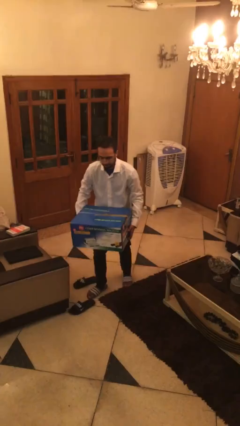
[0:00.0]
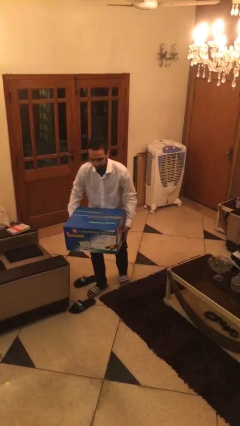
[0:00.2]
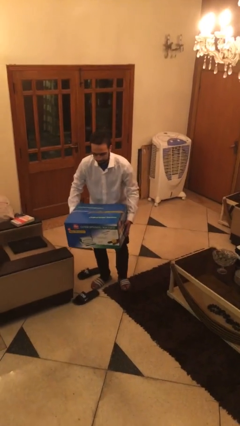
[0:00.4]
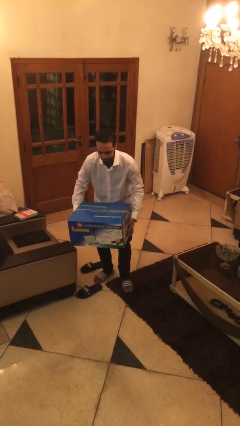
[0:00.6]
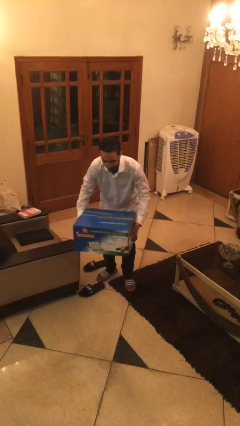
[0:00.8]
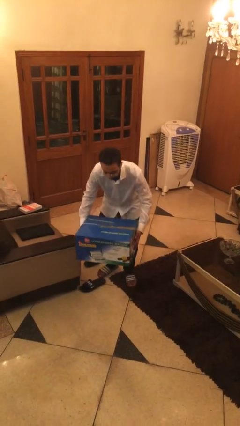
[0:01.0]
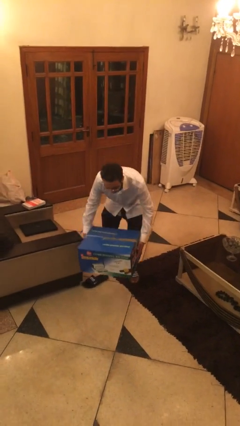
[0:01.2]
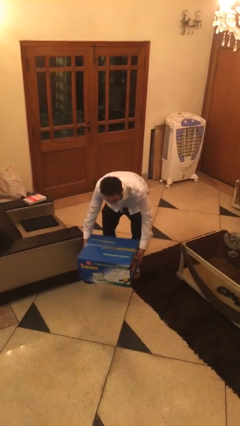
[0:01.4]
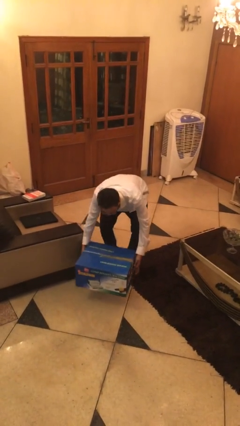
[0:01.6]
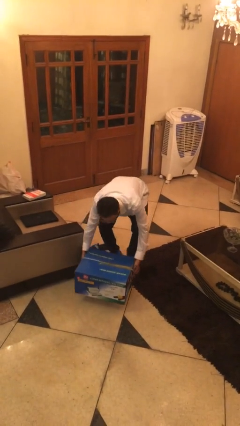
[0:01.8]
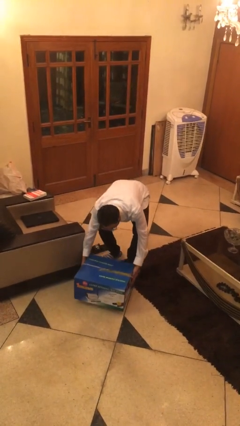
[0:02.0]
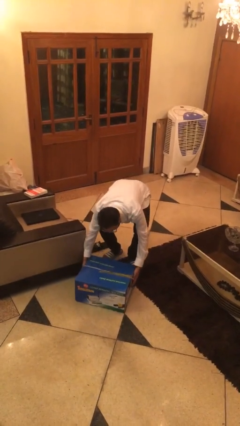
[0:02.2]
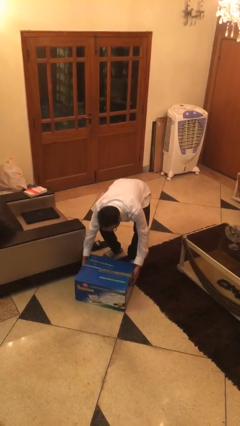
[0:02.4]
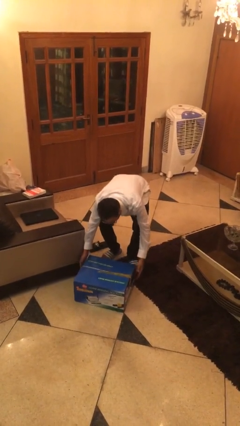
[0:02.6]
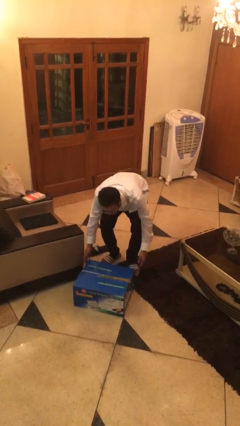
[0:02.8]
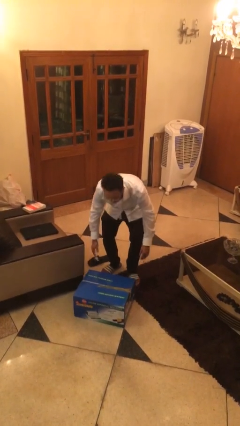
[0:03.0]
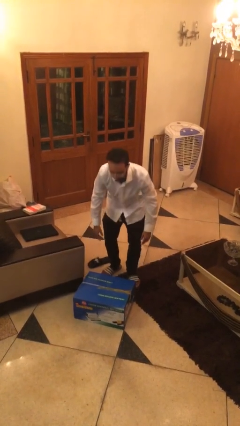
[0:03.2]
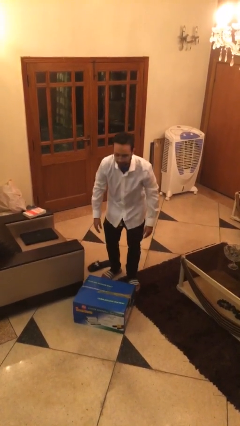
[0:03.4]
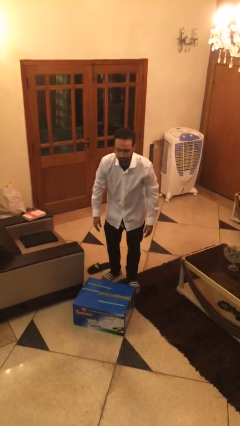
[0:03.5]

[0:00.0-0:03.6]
person puts down object on floor

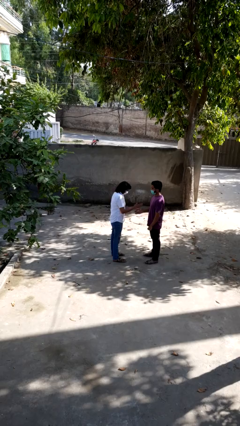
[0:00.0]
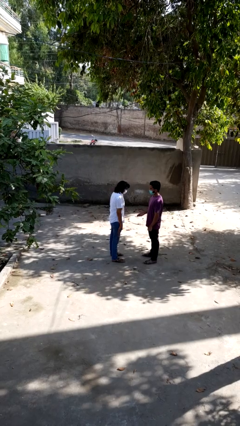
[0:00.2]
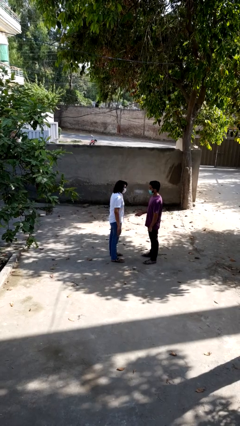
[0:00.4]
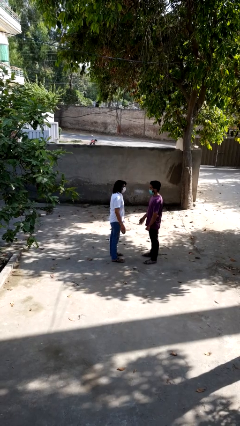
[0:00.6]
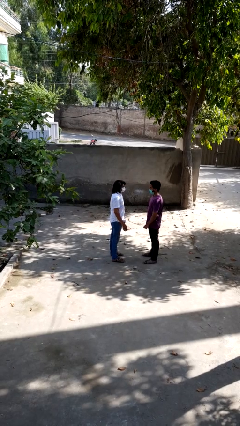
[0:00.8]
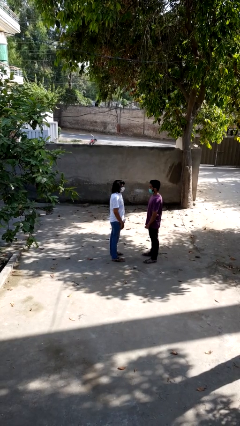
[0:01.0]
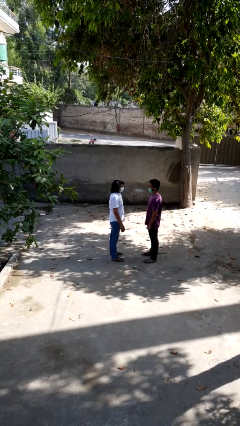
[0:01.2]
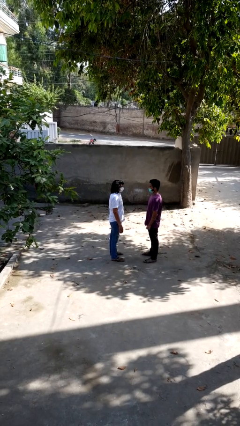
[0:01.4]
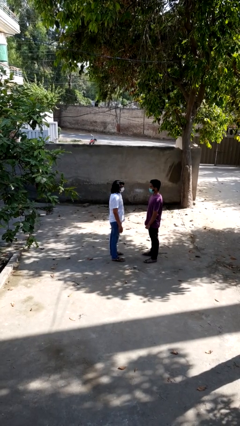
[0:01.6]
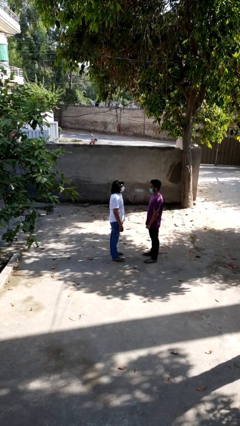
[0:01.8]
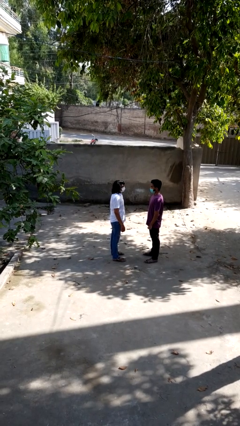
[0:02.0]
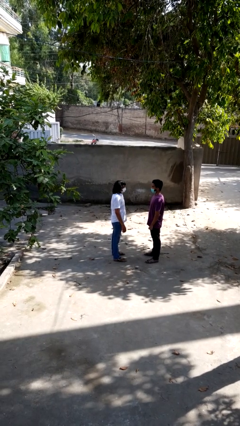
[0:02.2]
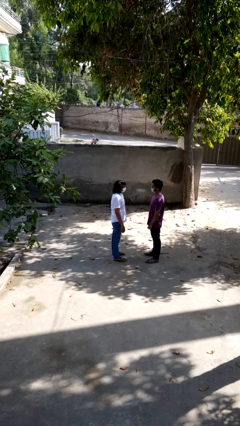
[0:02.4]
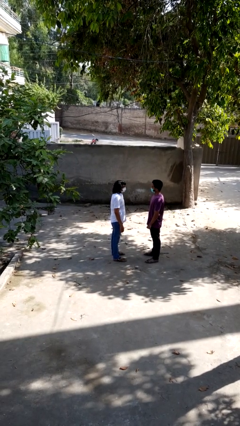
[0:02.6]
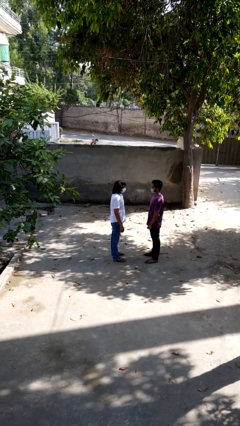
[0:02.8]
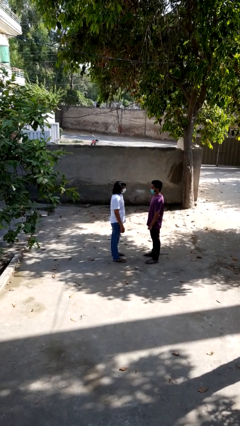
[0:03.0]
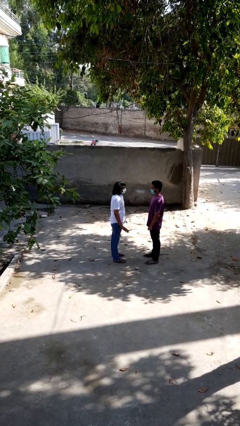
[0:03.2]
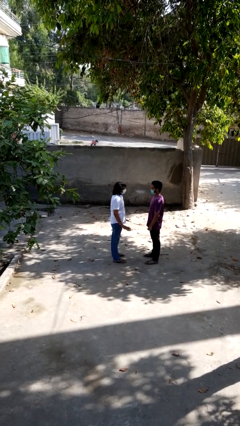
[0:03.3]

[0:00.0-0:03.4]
person highfives hand

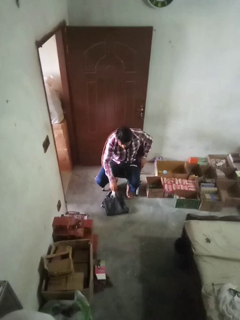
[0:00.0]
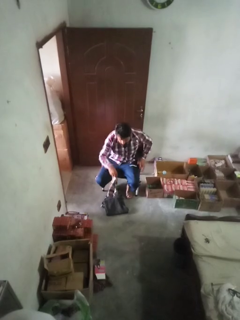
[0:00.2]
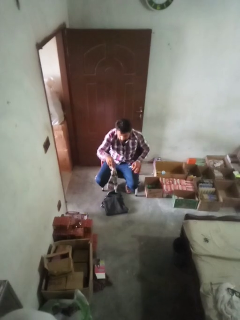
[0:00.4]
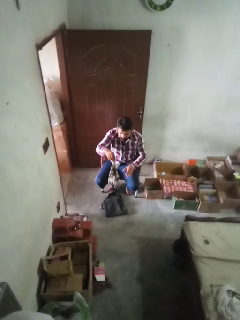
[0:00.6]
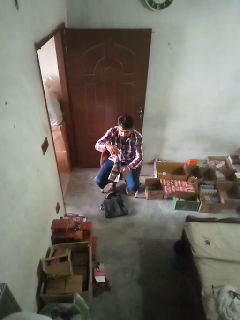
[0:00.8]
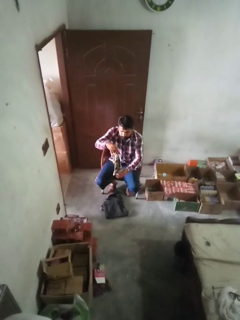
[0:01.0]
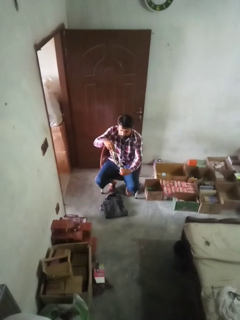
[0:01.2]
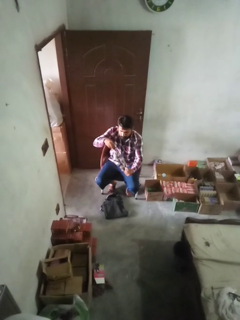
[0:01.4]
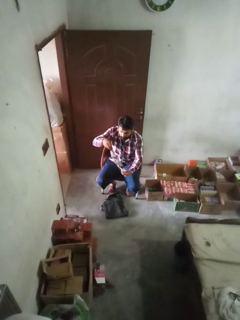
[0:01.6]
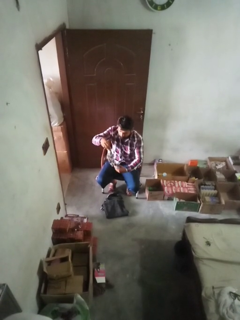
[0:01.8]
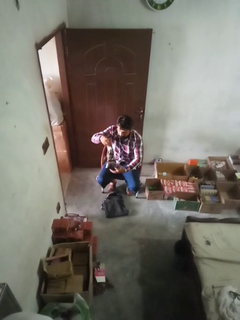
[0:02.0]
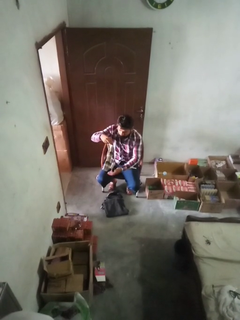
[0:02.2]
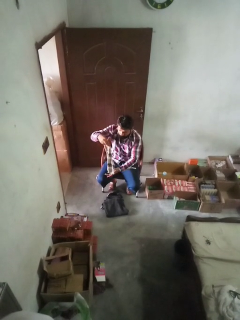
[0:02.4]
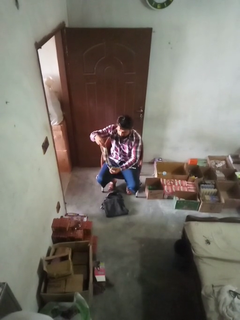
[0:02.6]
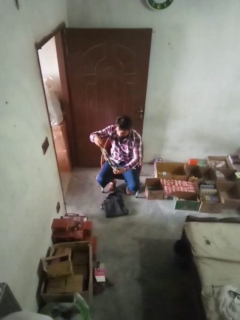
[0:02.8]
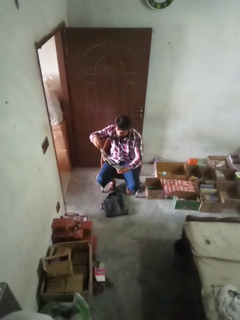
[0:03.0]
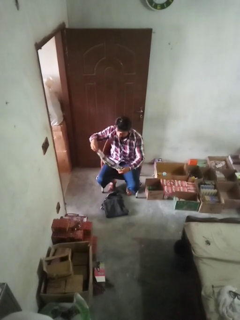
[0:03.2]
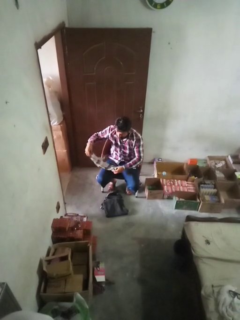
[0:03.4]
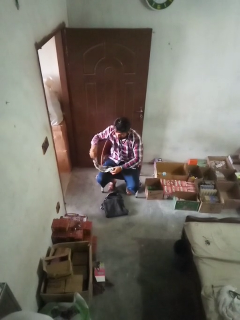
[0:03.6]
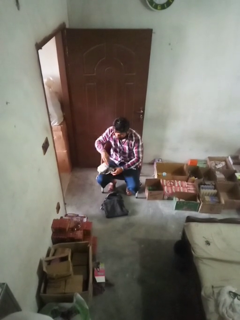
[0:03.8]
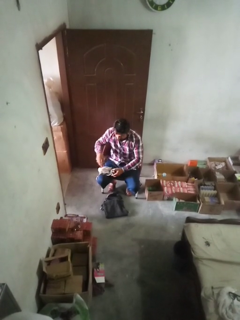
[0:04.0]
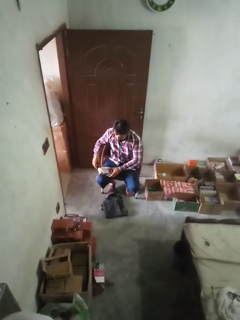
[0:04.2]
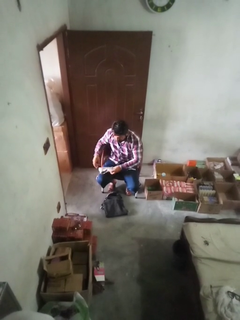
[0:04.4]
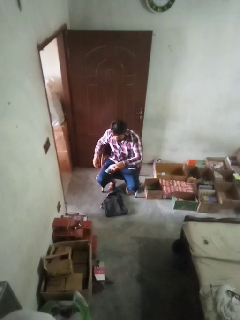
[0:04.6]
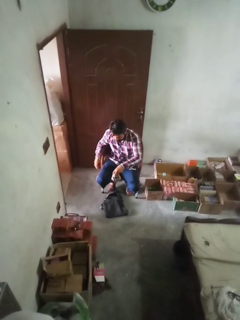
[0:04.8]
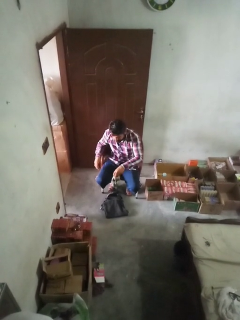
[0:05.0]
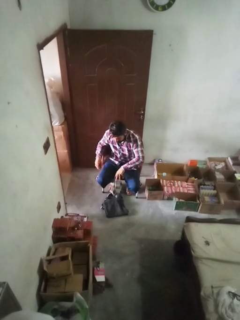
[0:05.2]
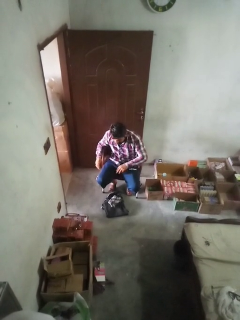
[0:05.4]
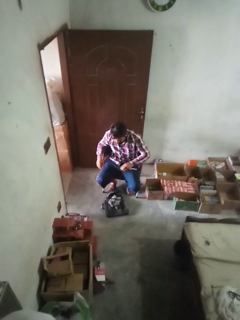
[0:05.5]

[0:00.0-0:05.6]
person folds socks

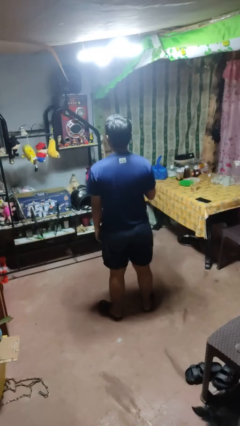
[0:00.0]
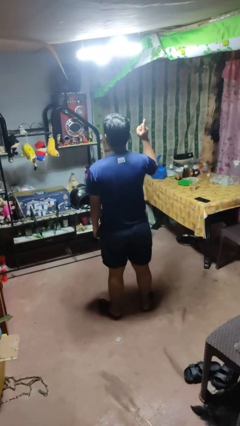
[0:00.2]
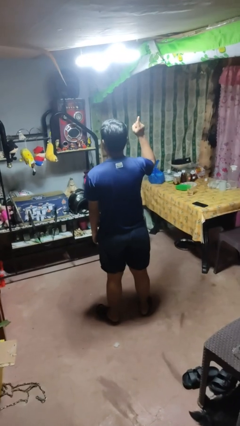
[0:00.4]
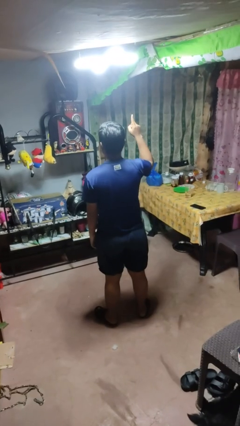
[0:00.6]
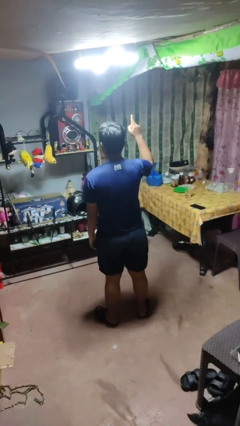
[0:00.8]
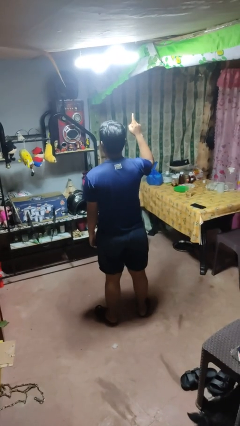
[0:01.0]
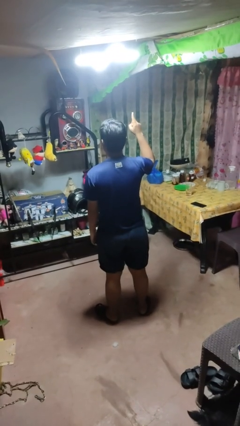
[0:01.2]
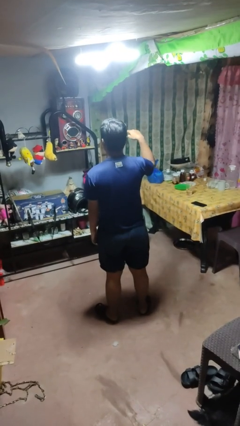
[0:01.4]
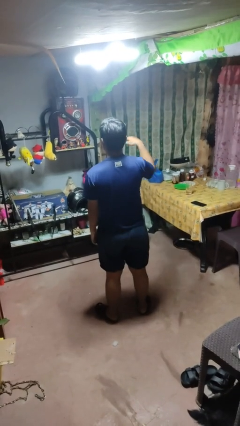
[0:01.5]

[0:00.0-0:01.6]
person gestures number one

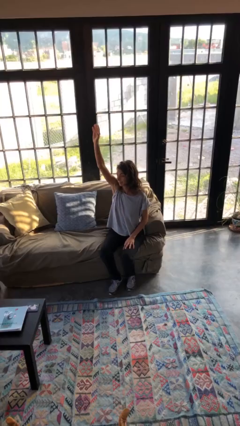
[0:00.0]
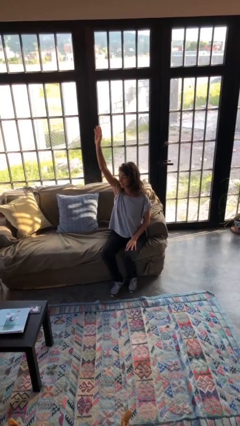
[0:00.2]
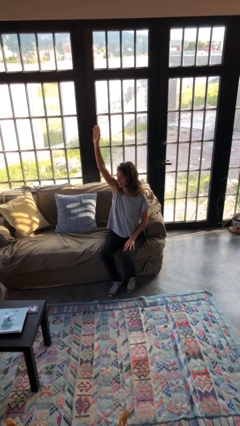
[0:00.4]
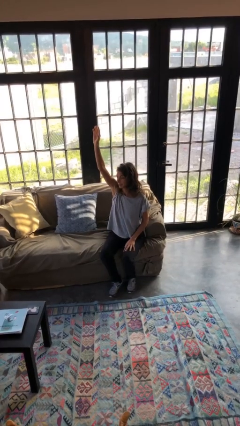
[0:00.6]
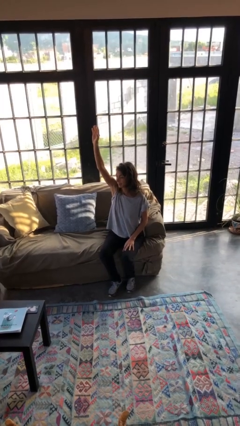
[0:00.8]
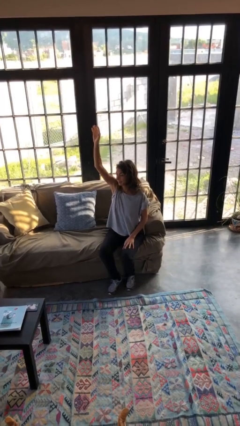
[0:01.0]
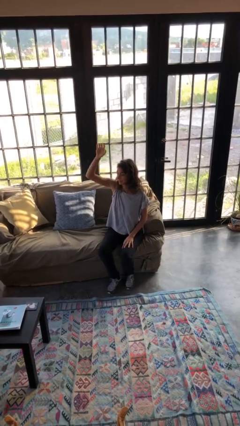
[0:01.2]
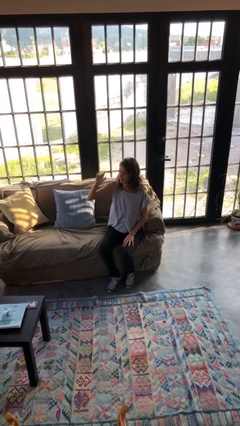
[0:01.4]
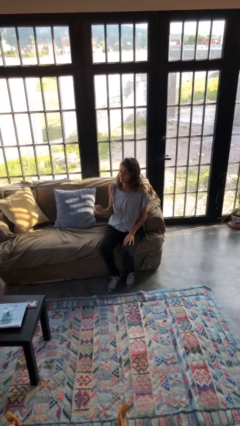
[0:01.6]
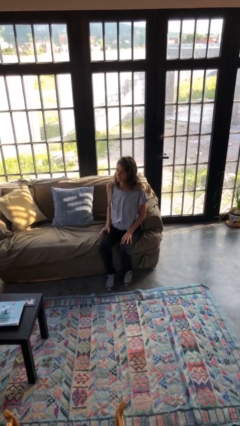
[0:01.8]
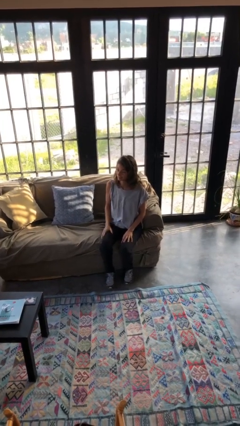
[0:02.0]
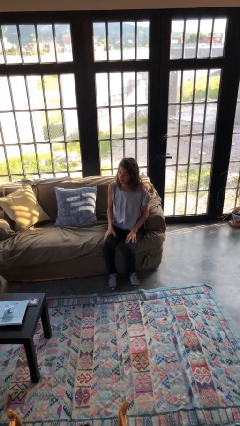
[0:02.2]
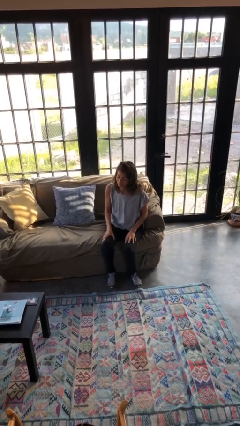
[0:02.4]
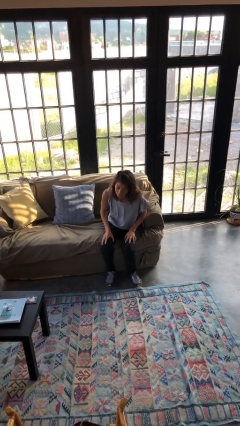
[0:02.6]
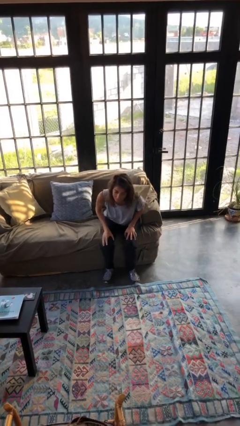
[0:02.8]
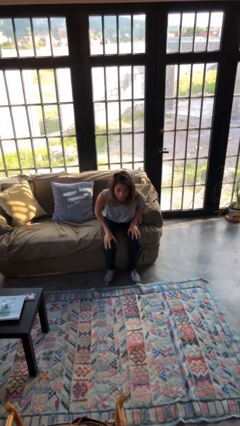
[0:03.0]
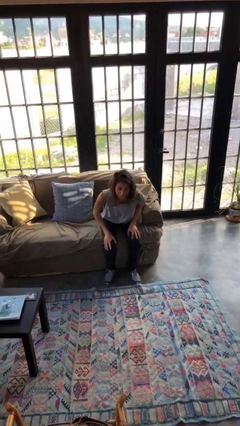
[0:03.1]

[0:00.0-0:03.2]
person gestures lower hand

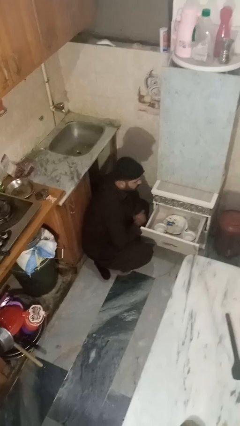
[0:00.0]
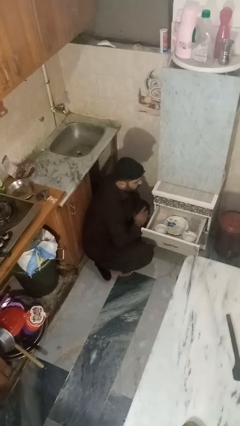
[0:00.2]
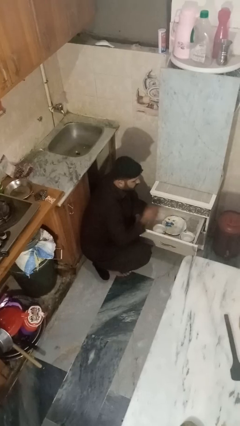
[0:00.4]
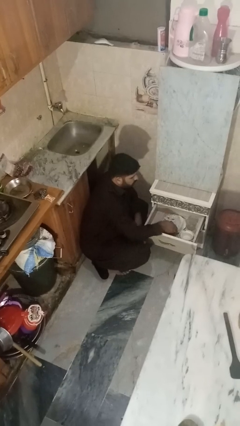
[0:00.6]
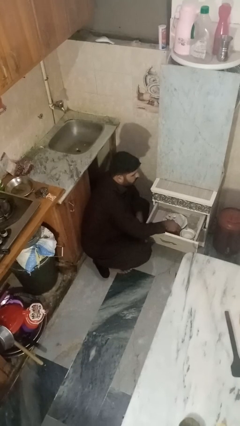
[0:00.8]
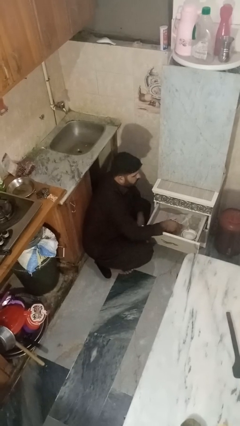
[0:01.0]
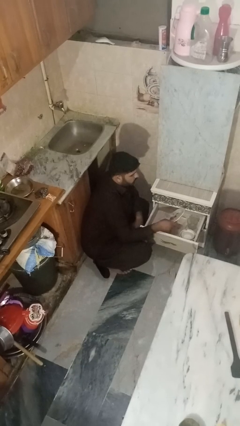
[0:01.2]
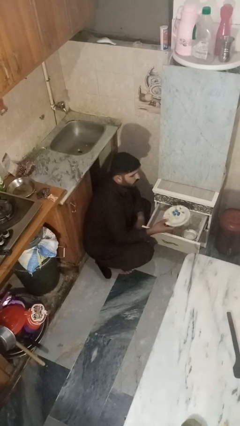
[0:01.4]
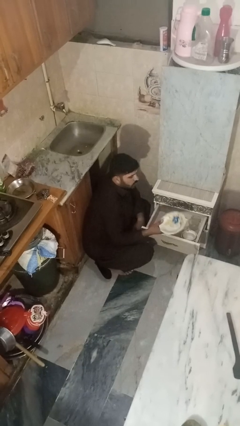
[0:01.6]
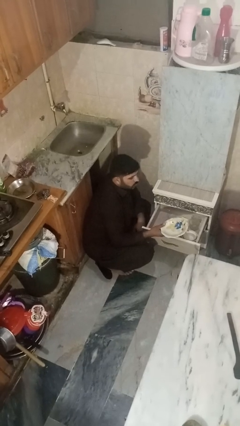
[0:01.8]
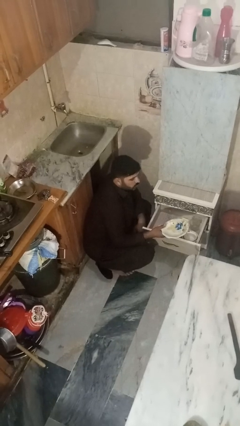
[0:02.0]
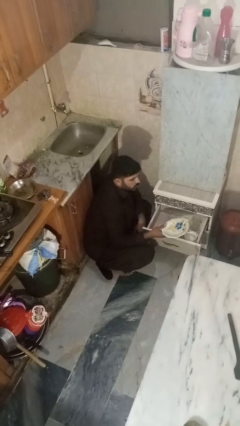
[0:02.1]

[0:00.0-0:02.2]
person takes object from kitchen drawer
